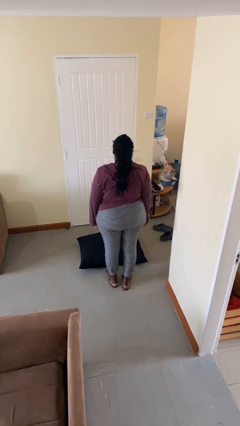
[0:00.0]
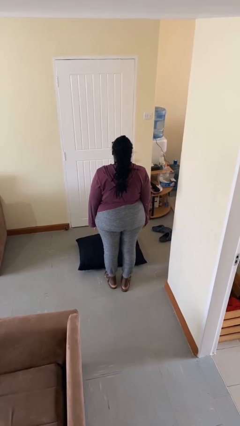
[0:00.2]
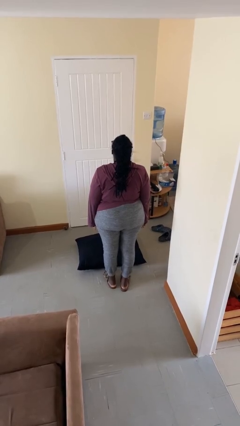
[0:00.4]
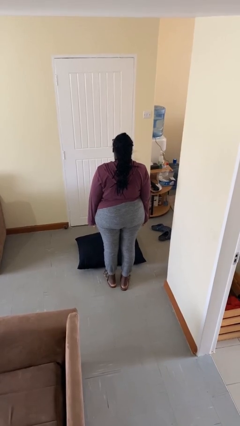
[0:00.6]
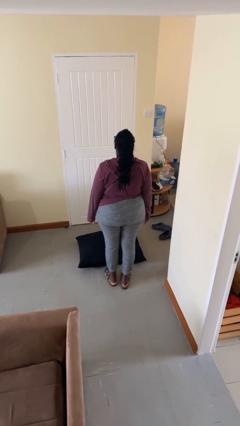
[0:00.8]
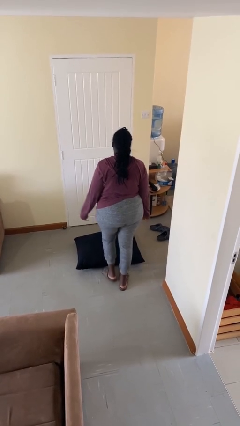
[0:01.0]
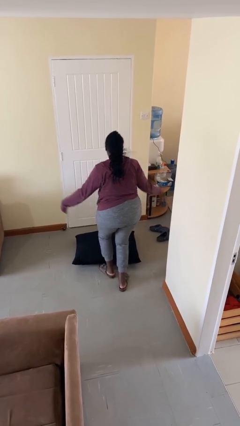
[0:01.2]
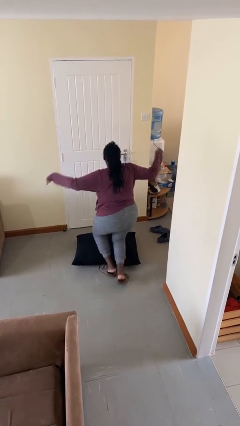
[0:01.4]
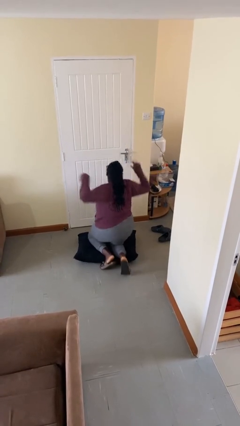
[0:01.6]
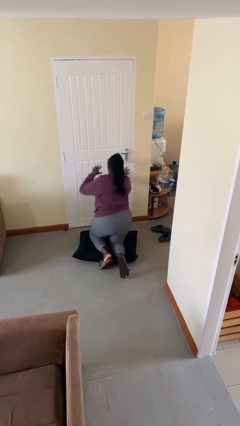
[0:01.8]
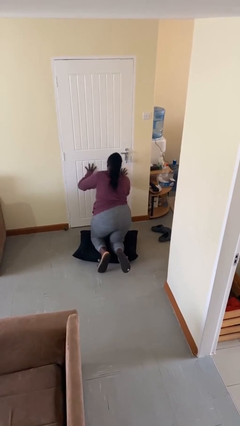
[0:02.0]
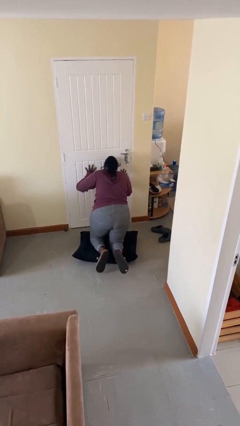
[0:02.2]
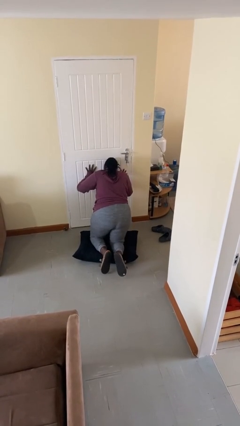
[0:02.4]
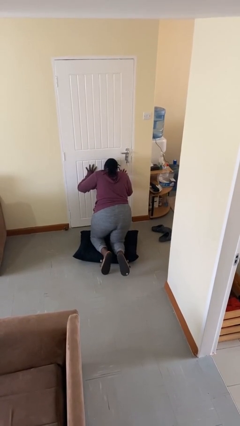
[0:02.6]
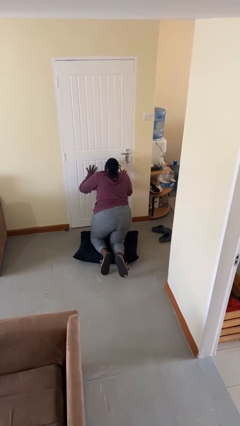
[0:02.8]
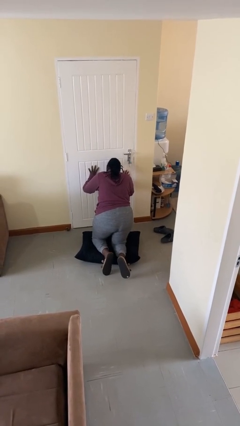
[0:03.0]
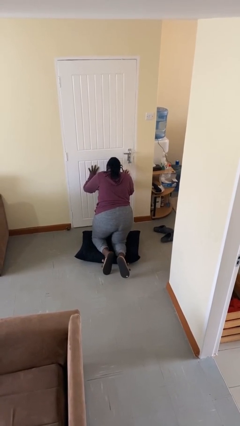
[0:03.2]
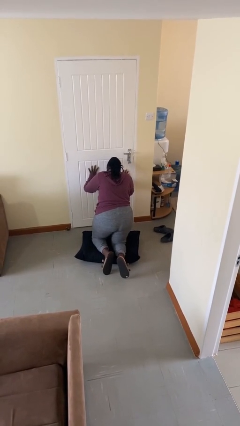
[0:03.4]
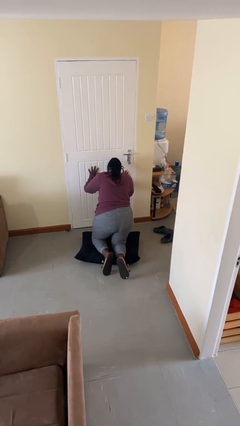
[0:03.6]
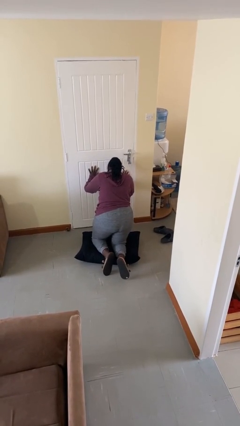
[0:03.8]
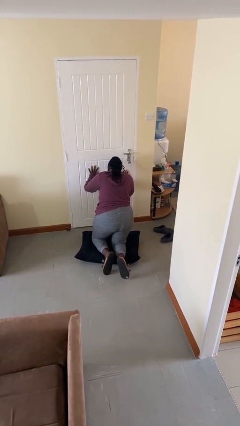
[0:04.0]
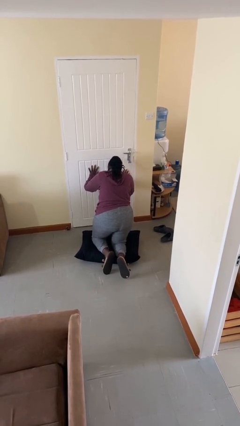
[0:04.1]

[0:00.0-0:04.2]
person trips on object on floor

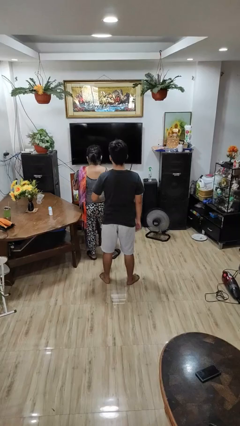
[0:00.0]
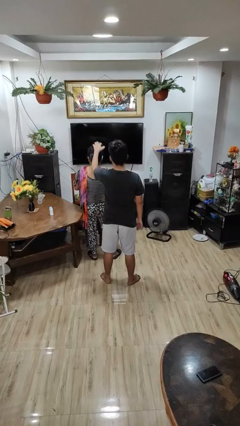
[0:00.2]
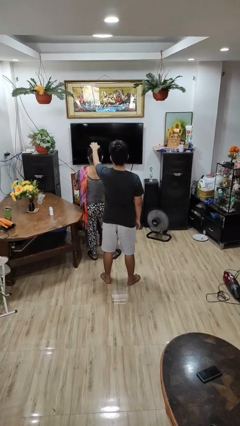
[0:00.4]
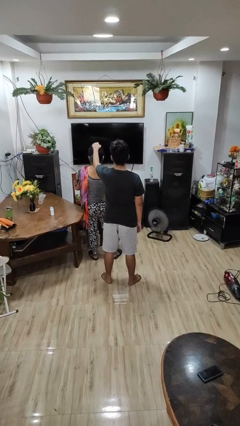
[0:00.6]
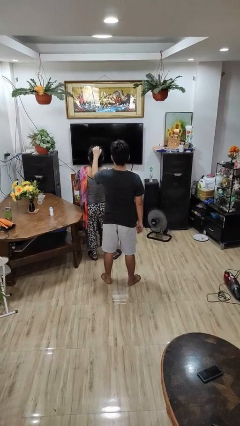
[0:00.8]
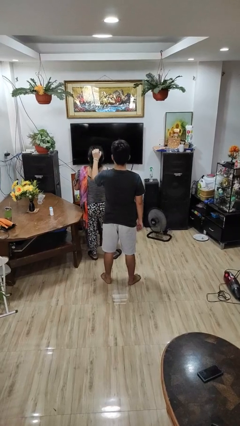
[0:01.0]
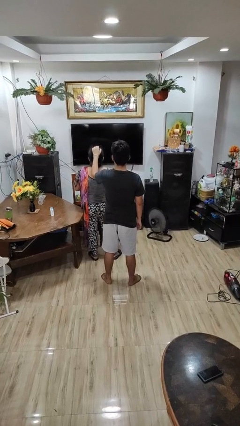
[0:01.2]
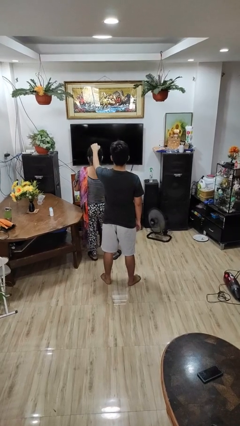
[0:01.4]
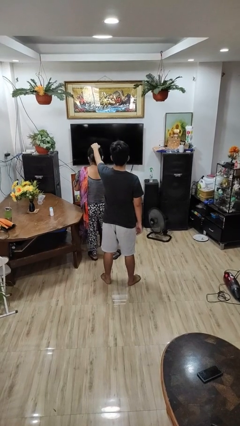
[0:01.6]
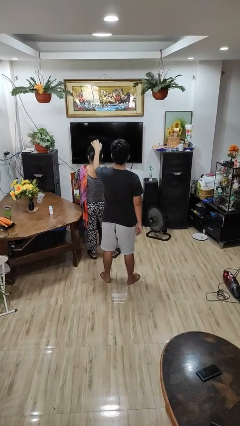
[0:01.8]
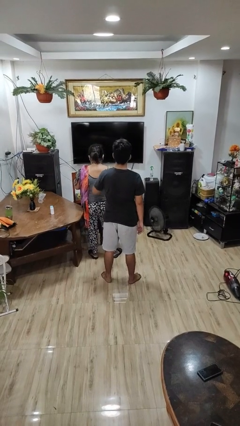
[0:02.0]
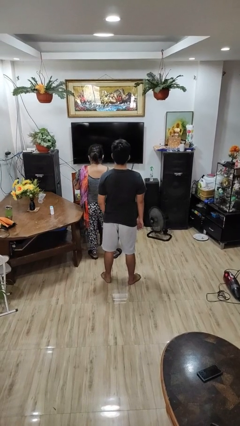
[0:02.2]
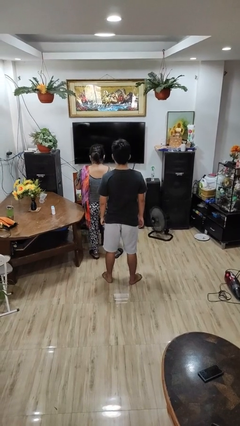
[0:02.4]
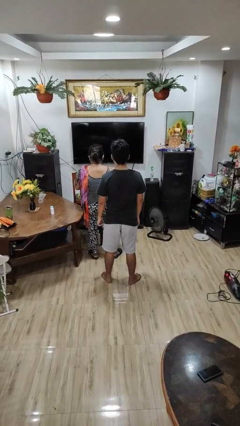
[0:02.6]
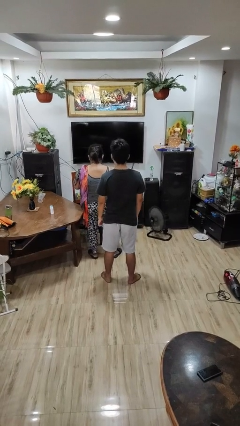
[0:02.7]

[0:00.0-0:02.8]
person grabs person by hair

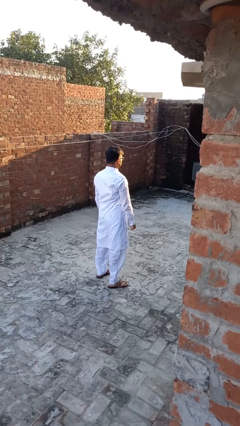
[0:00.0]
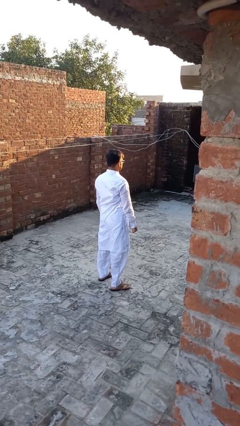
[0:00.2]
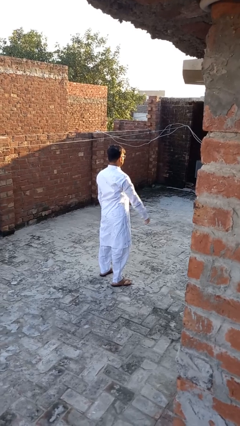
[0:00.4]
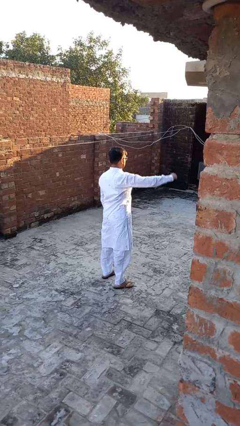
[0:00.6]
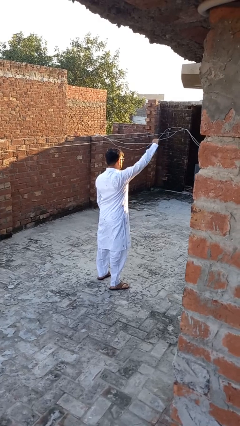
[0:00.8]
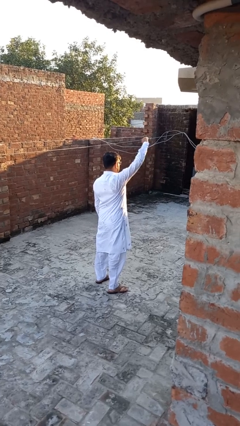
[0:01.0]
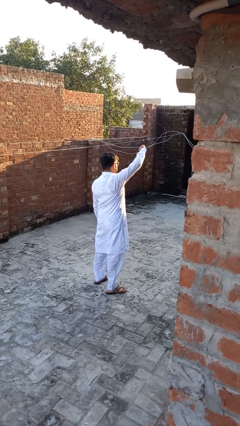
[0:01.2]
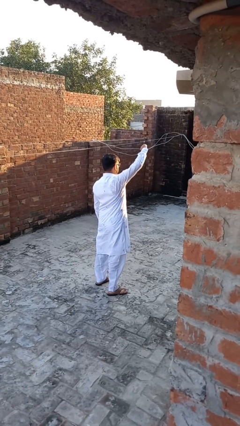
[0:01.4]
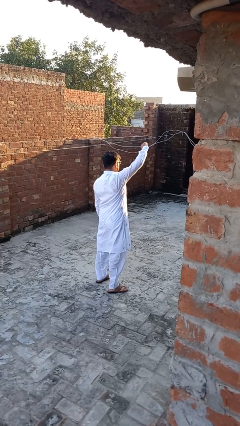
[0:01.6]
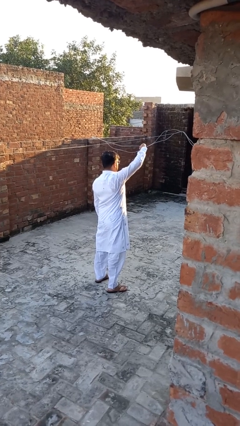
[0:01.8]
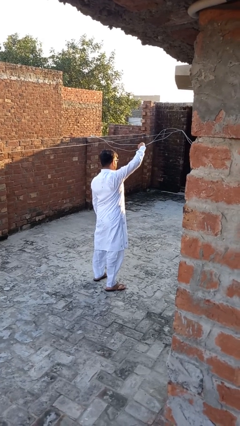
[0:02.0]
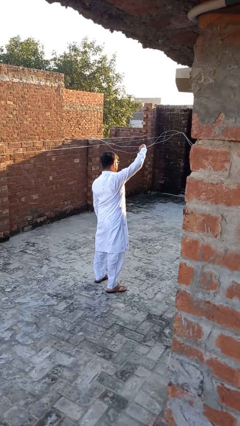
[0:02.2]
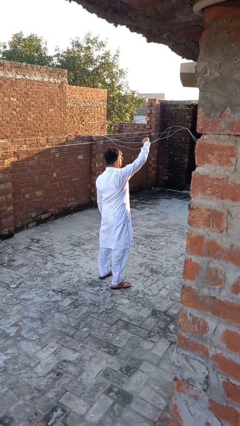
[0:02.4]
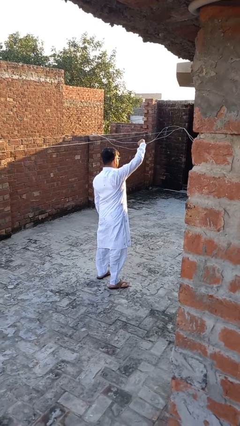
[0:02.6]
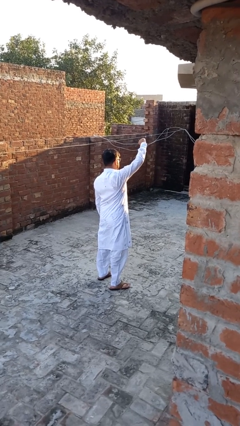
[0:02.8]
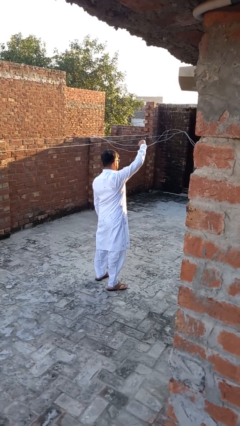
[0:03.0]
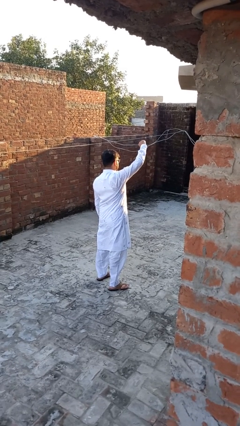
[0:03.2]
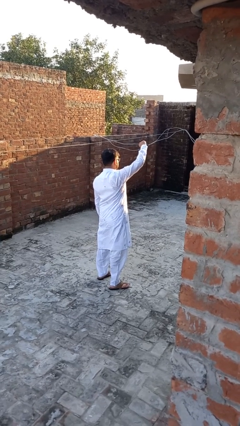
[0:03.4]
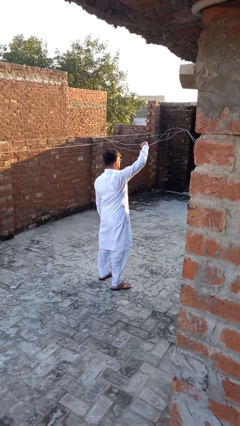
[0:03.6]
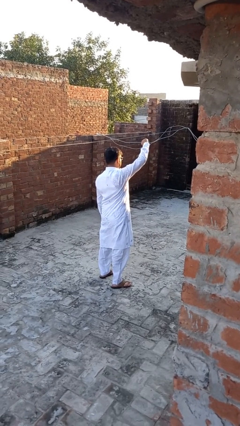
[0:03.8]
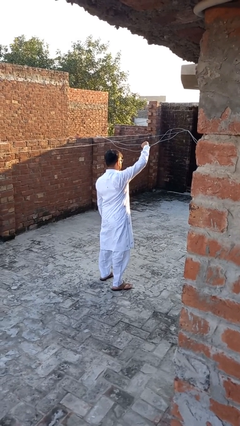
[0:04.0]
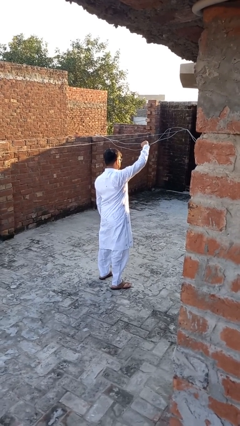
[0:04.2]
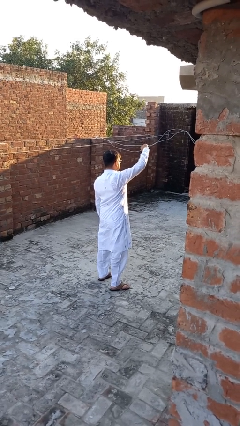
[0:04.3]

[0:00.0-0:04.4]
person gestures thumbs down

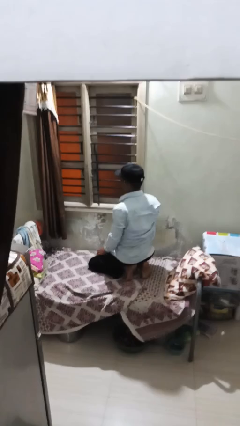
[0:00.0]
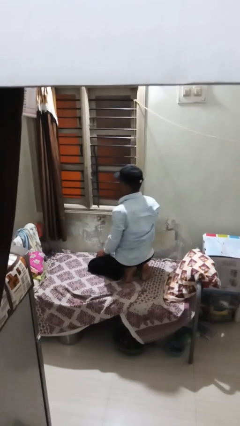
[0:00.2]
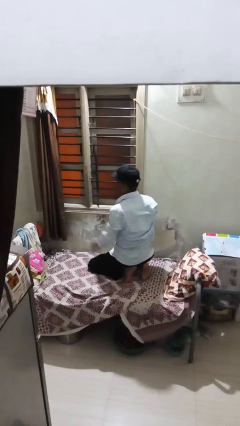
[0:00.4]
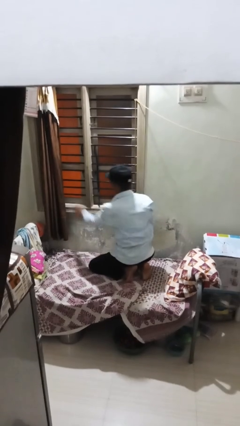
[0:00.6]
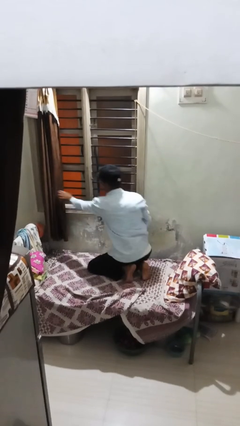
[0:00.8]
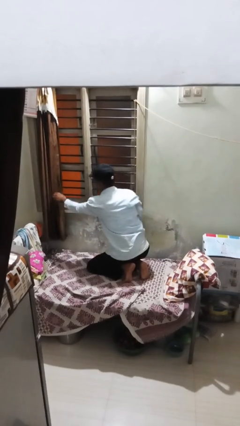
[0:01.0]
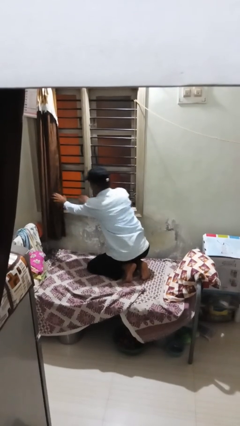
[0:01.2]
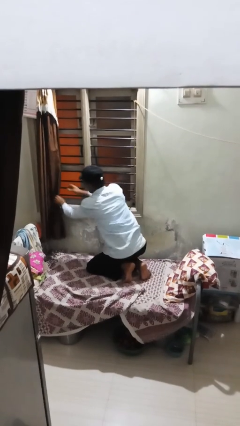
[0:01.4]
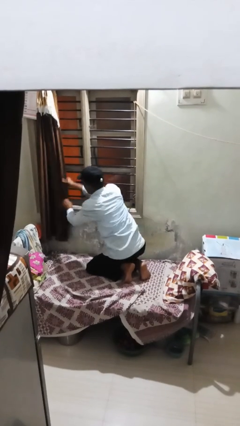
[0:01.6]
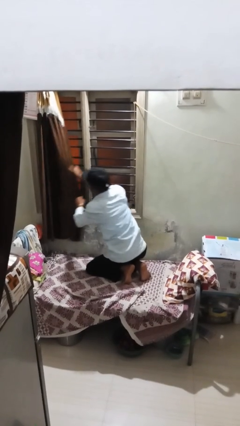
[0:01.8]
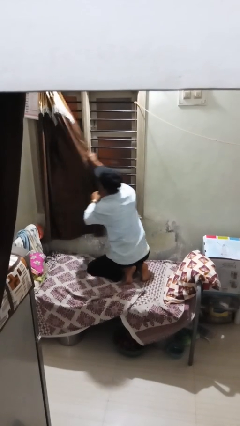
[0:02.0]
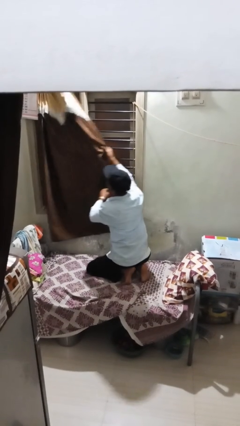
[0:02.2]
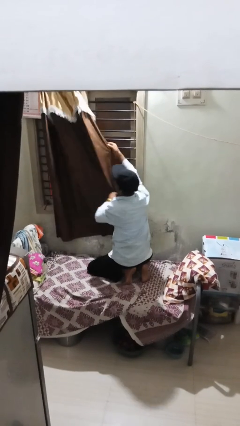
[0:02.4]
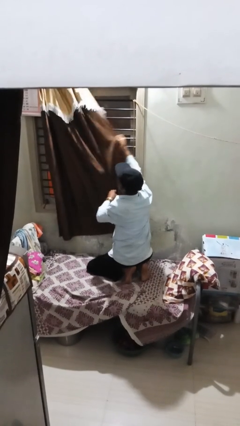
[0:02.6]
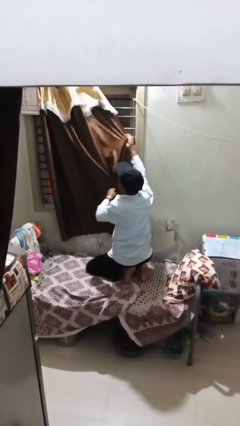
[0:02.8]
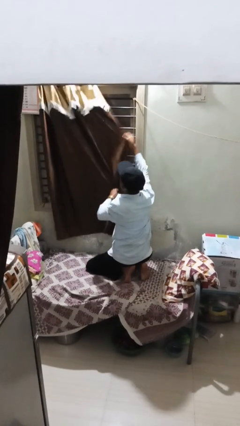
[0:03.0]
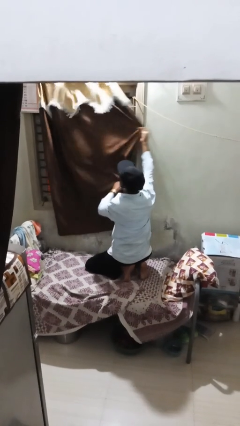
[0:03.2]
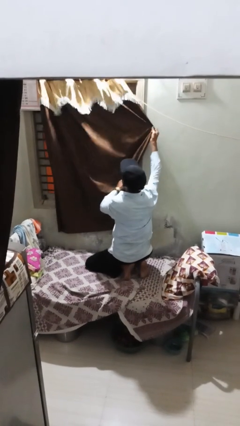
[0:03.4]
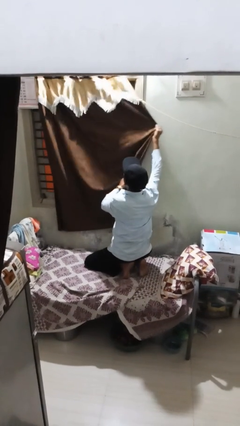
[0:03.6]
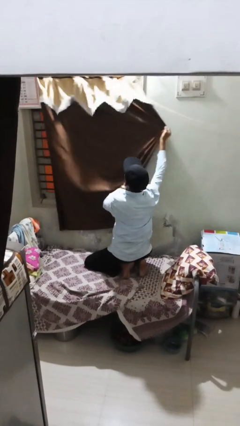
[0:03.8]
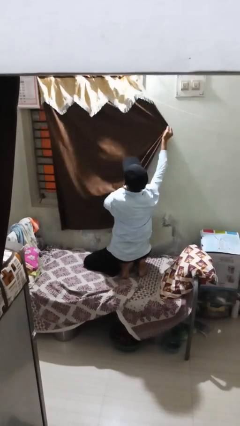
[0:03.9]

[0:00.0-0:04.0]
person closes curtains

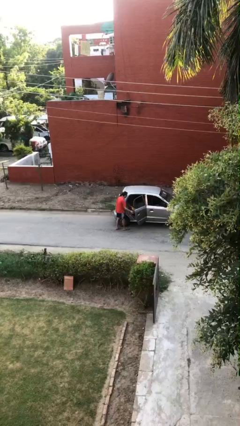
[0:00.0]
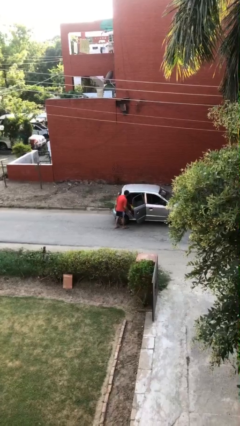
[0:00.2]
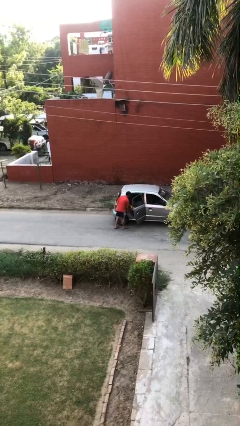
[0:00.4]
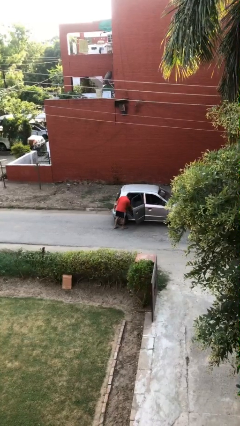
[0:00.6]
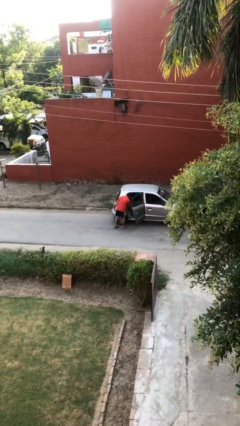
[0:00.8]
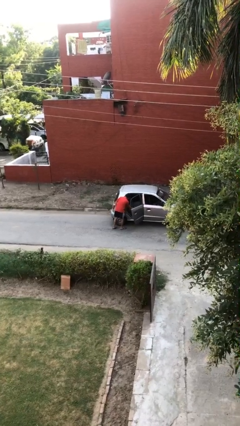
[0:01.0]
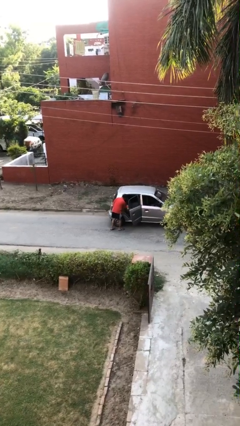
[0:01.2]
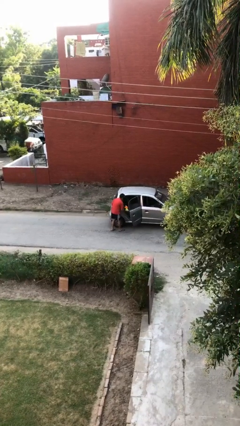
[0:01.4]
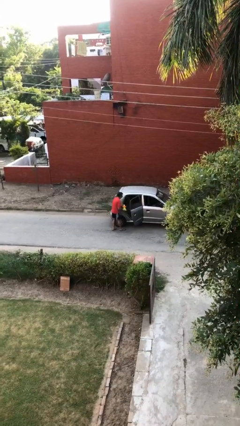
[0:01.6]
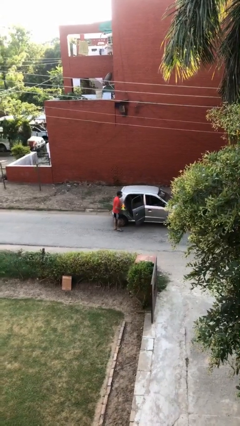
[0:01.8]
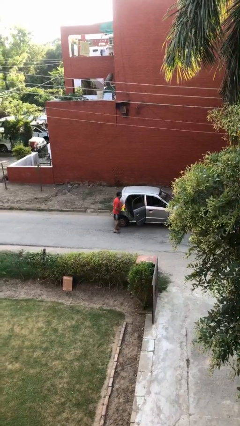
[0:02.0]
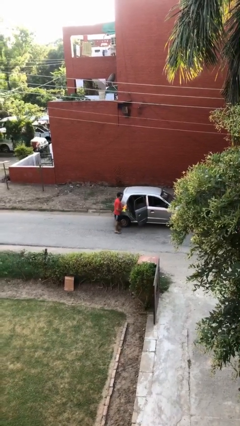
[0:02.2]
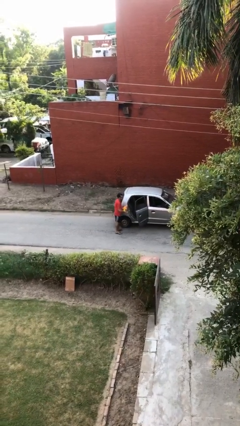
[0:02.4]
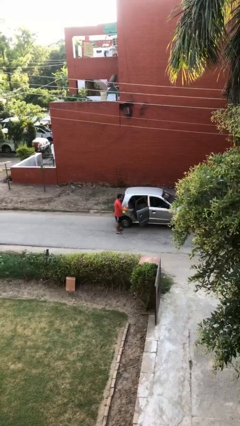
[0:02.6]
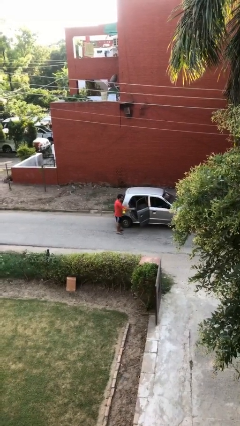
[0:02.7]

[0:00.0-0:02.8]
person unloads car
